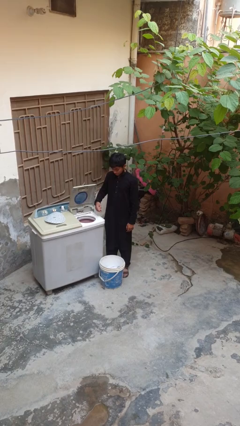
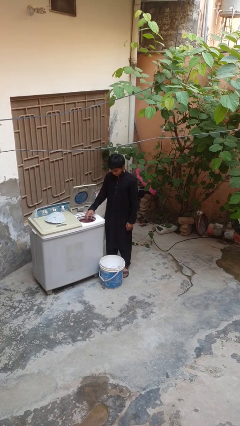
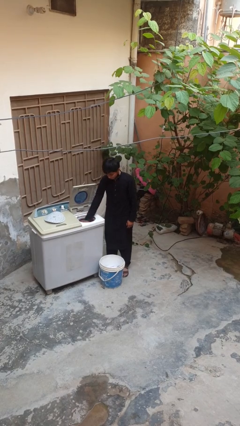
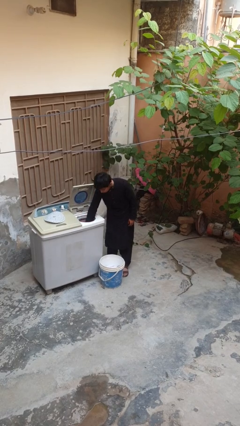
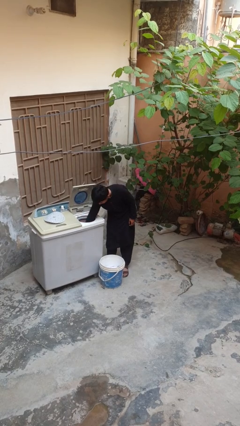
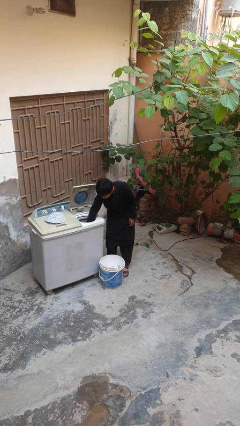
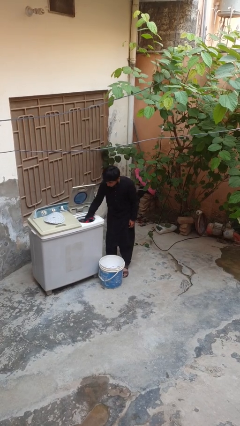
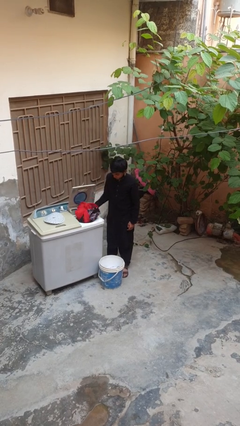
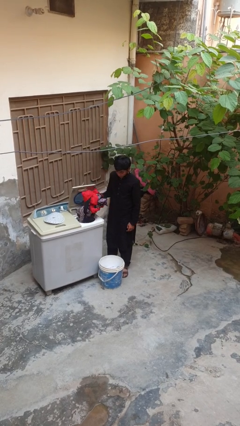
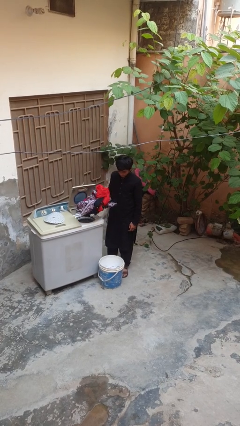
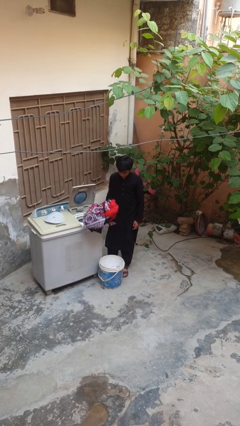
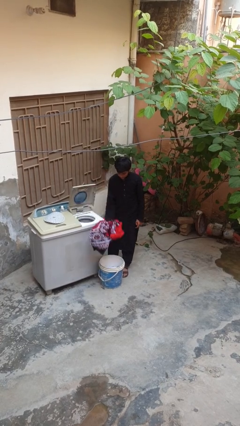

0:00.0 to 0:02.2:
person unloads dryer

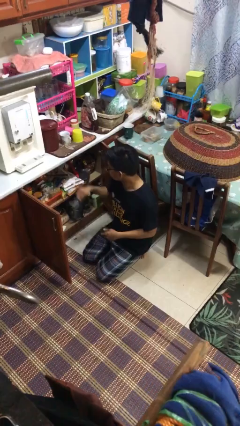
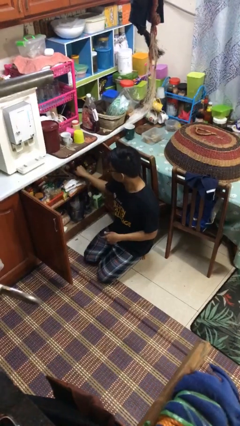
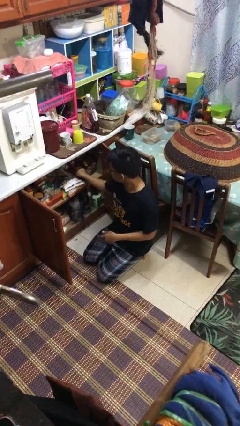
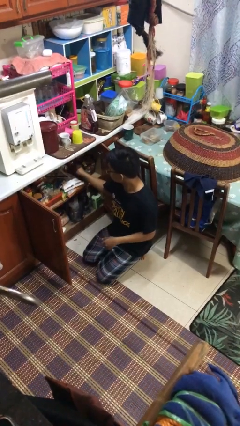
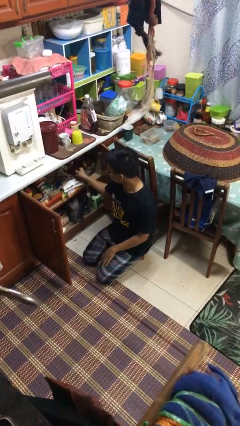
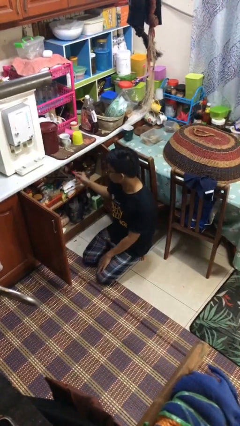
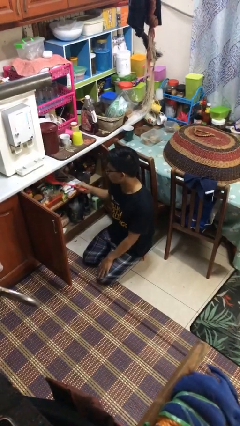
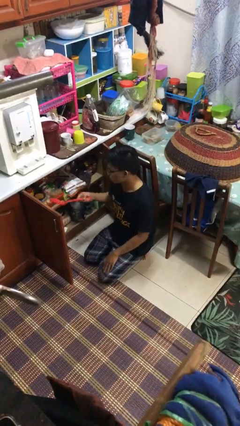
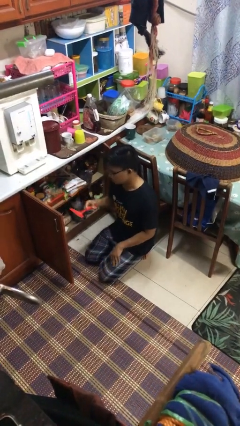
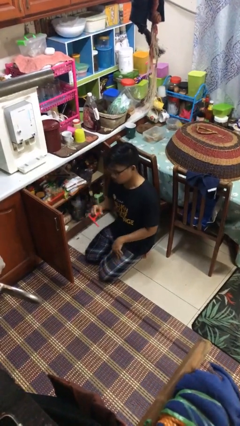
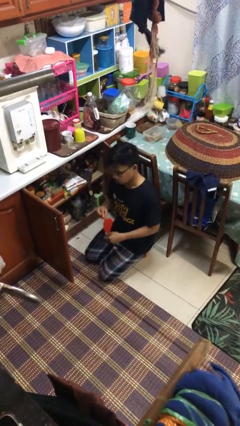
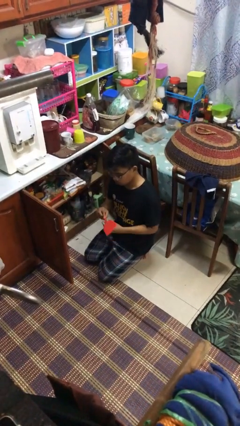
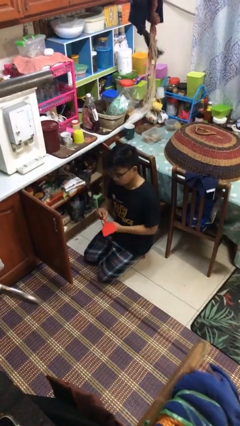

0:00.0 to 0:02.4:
person takes object from kitchen drawer

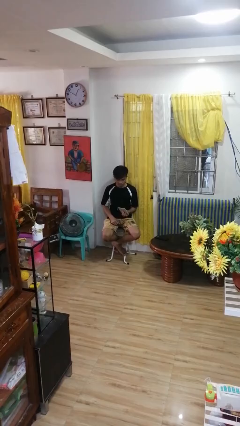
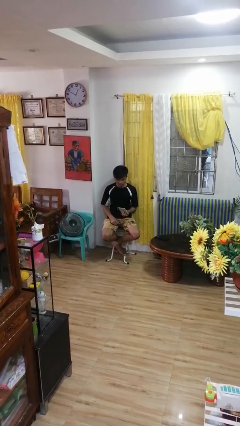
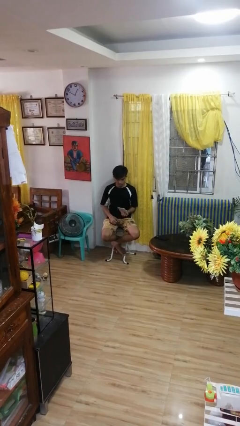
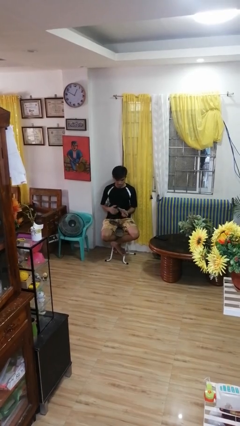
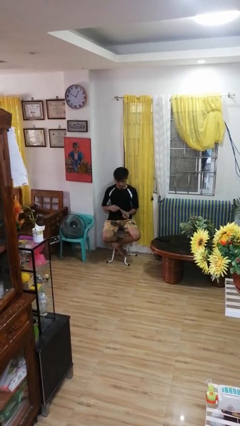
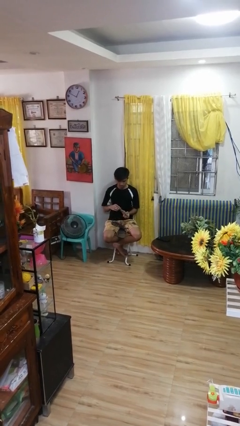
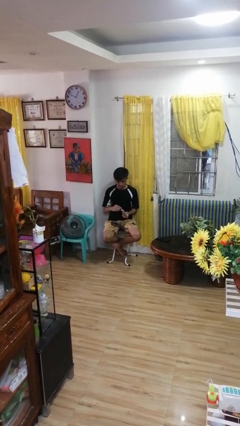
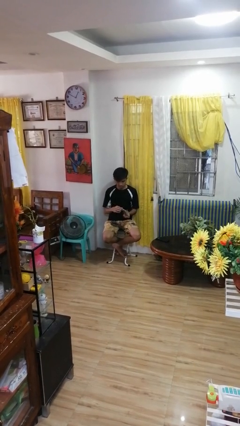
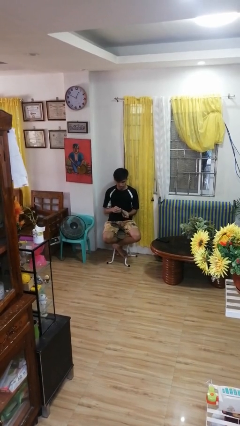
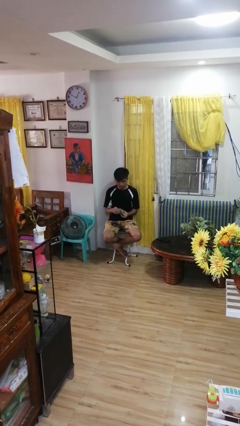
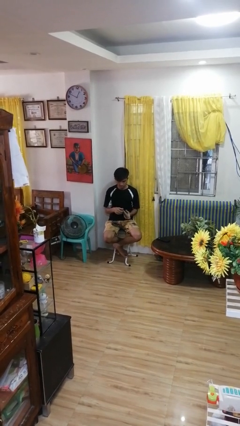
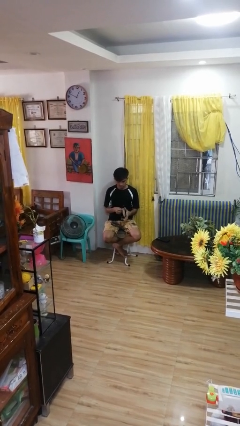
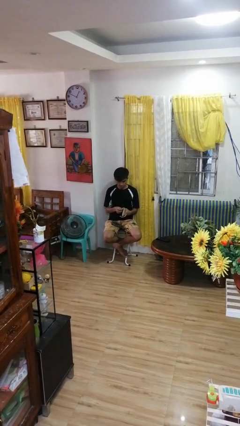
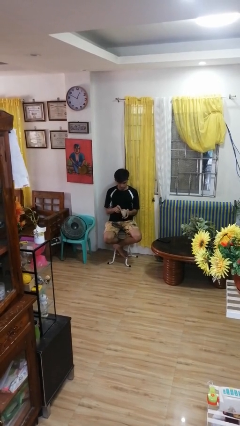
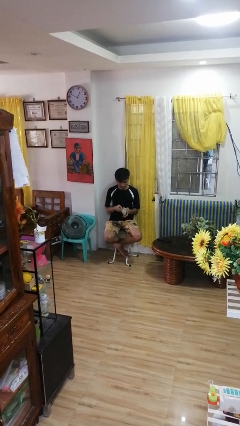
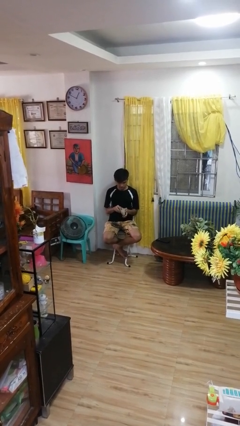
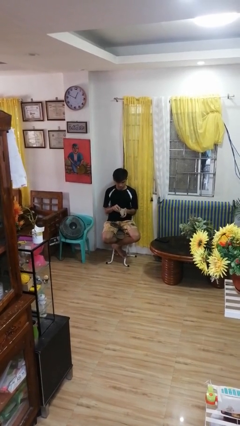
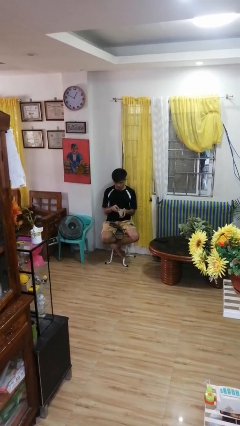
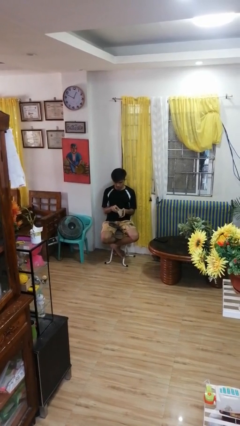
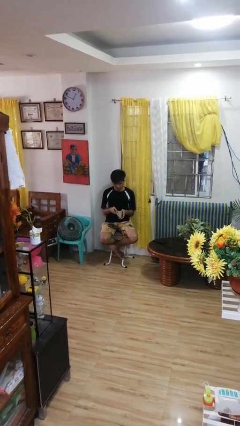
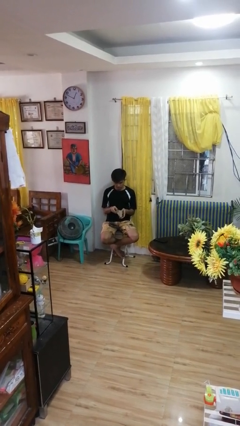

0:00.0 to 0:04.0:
person searches in purse

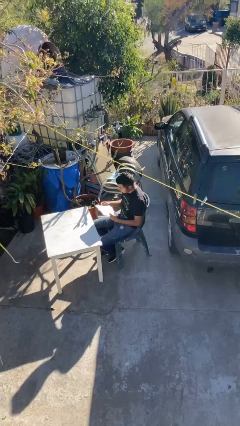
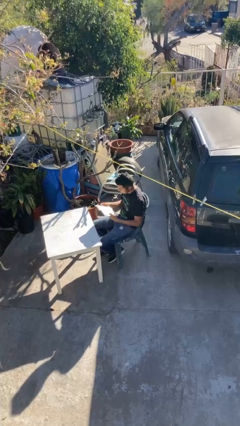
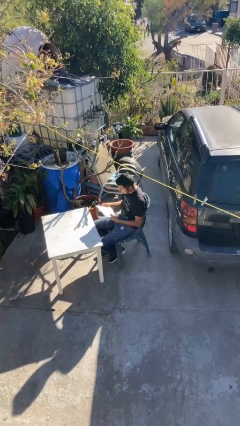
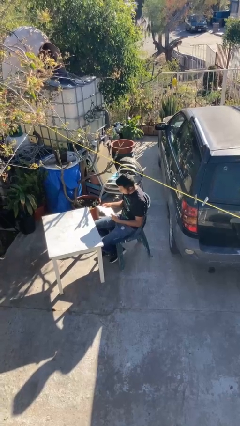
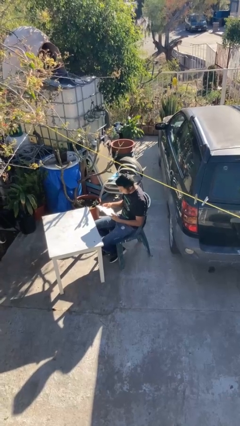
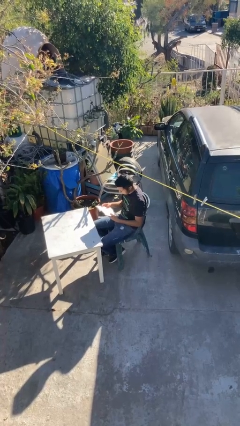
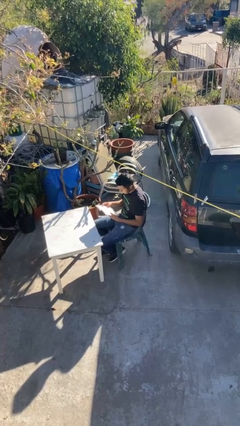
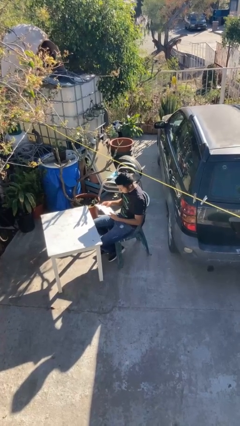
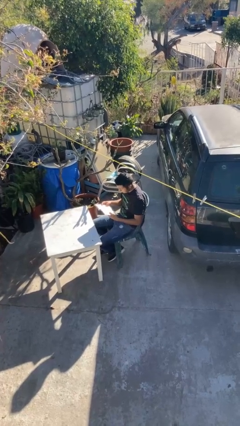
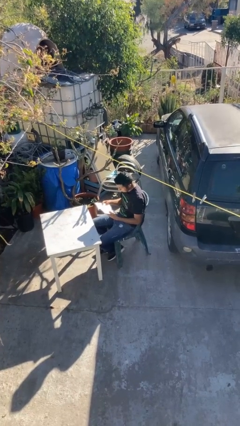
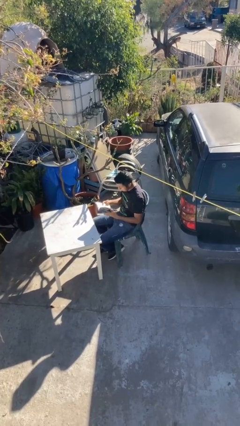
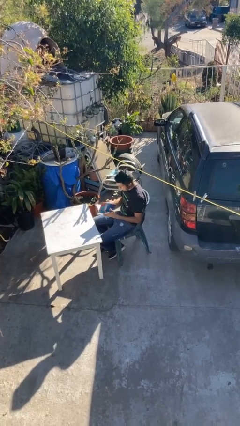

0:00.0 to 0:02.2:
person reads document

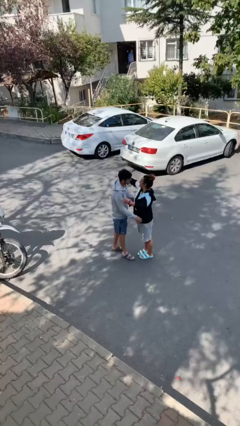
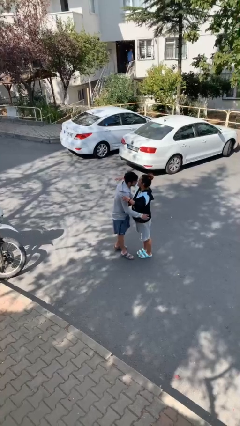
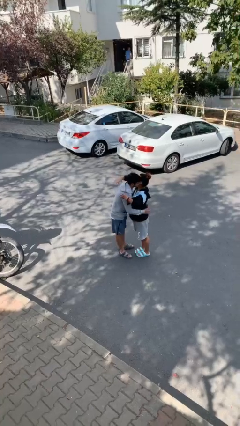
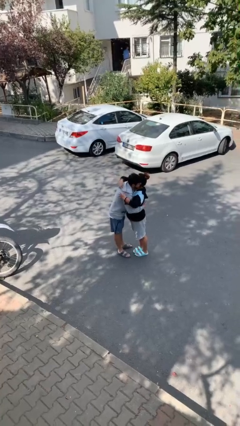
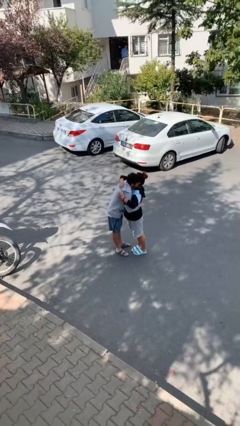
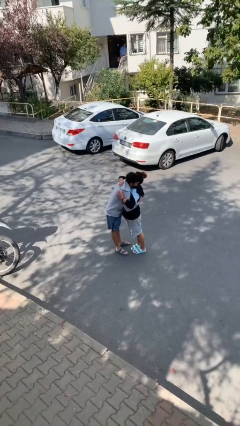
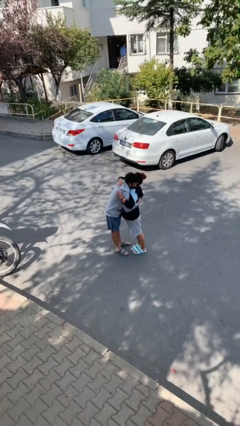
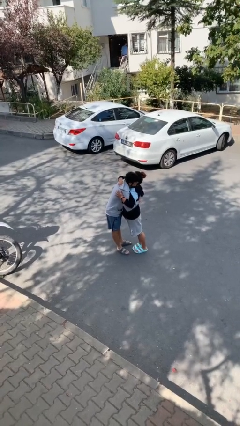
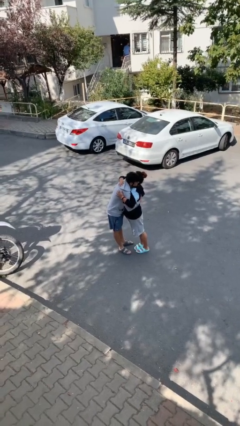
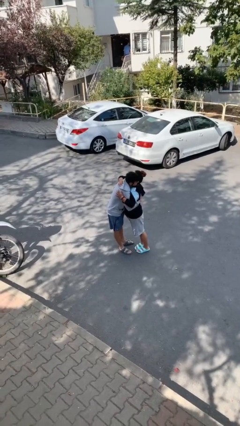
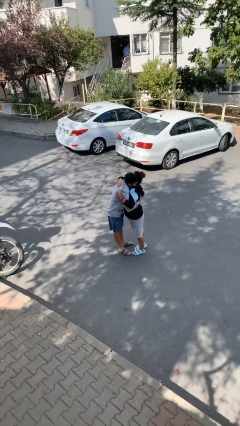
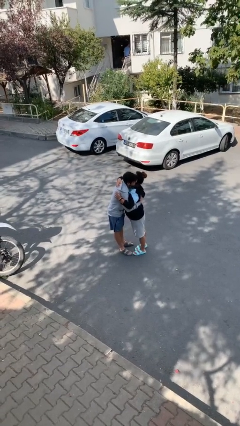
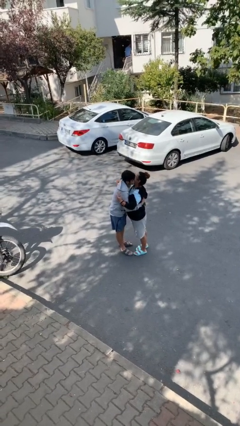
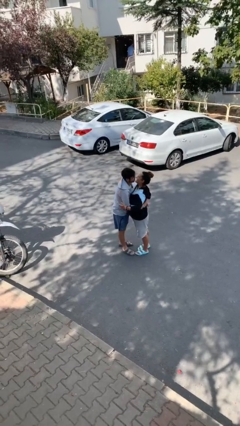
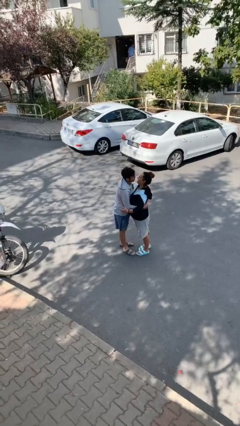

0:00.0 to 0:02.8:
person embraces person

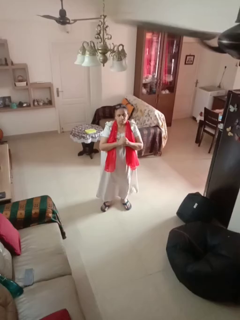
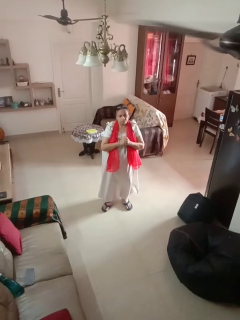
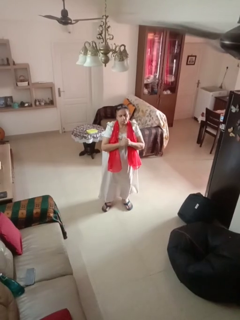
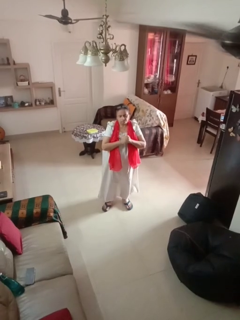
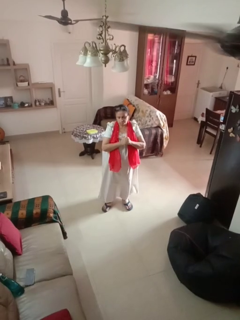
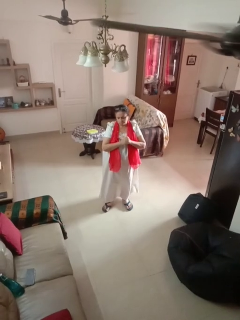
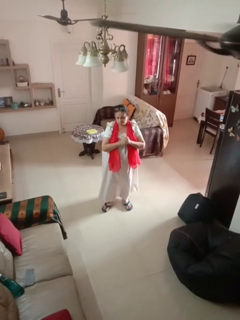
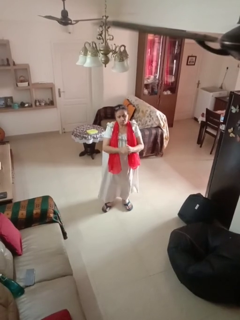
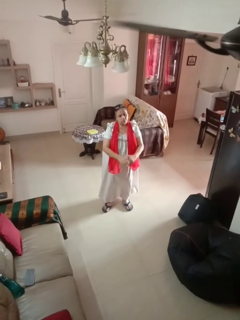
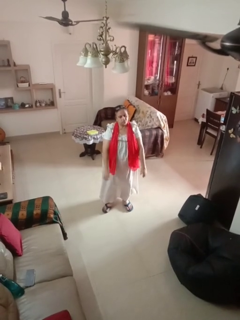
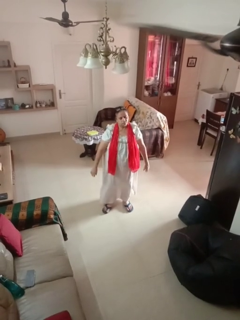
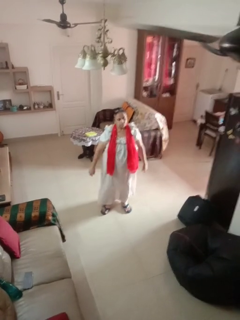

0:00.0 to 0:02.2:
person cracks knuckles

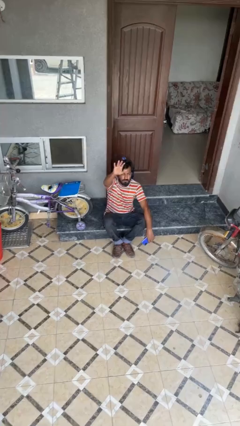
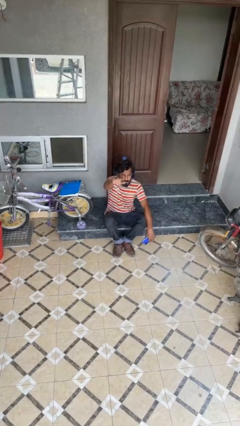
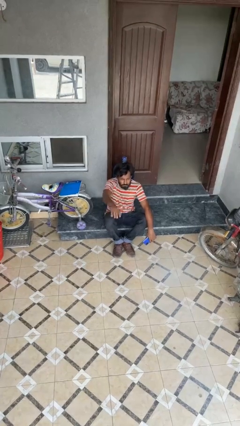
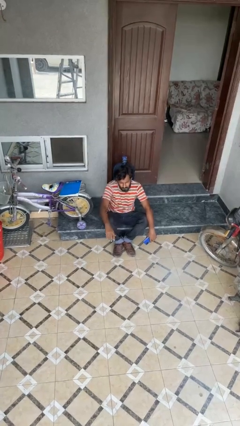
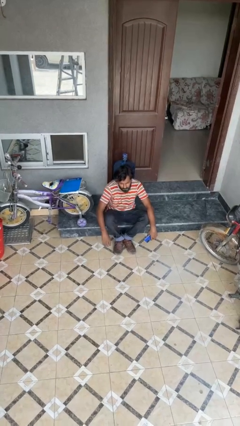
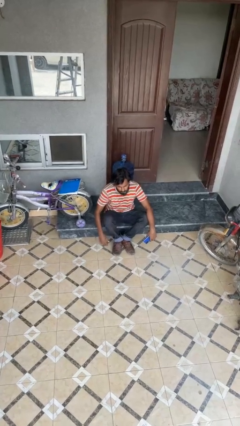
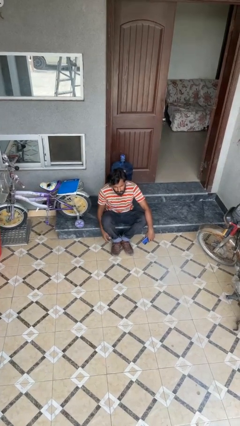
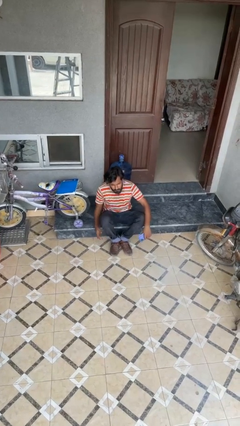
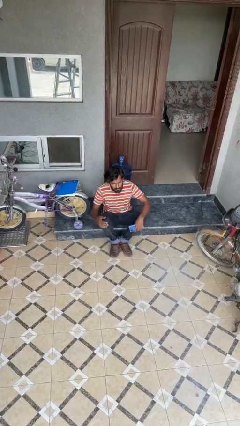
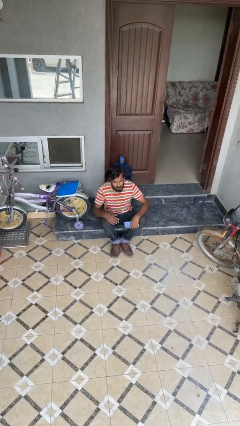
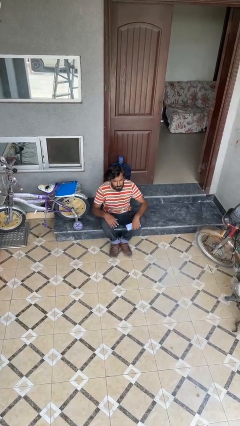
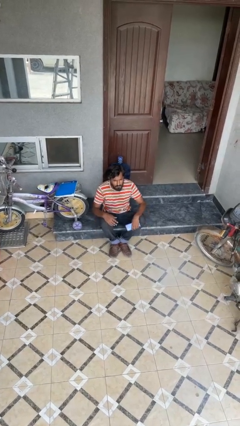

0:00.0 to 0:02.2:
person gestures lower hand
